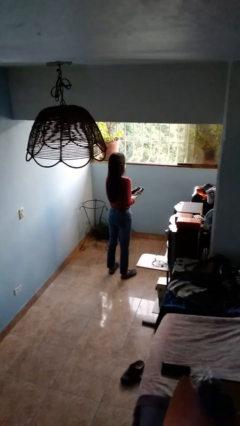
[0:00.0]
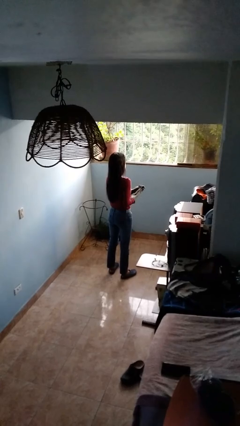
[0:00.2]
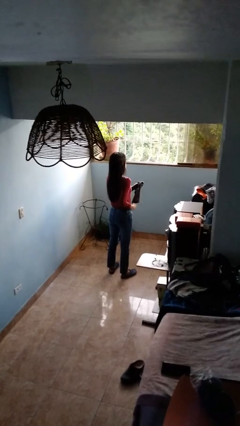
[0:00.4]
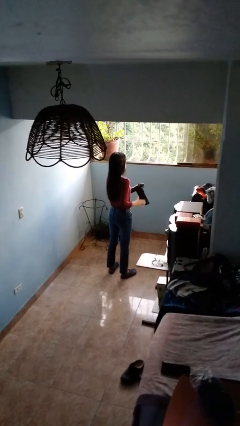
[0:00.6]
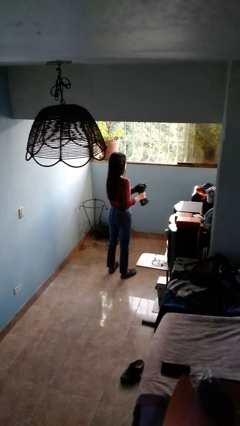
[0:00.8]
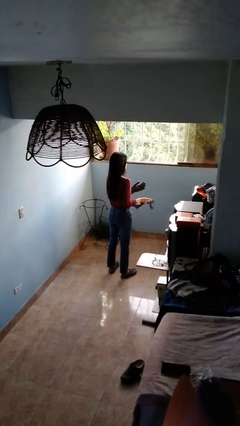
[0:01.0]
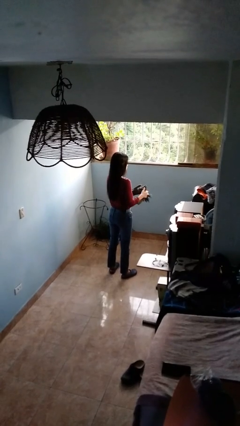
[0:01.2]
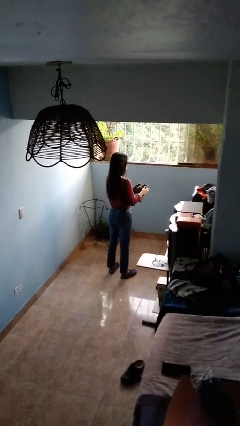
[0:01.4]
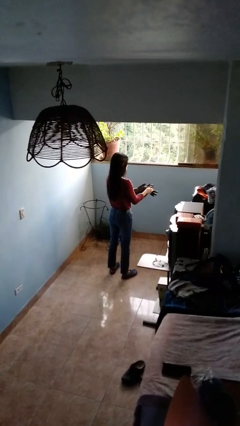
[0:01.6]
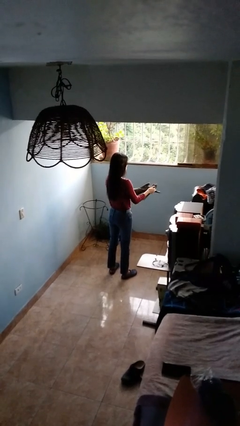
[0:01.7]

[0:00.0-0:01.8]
person takes off gloves

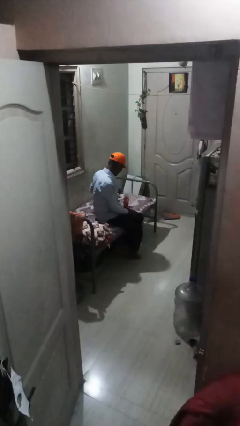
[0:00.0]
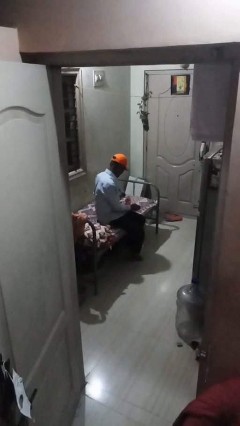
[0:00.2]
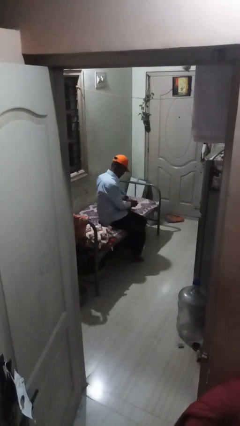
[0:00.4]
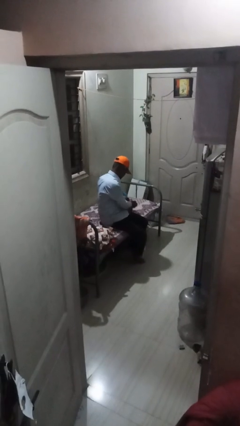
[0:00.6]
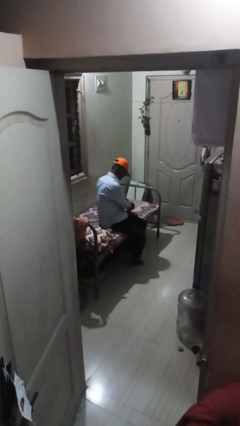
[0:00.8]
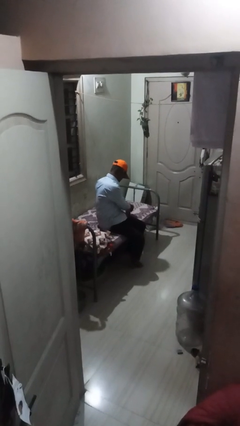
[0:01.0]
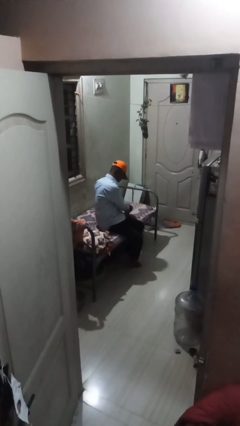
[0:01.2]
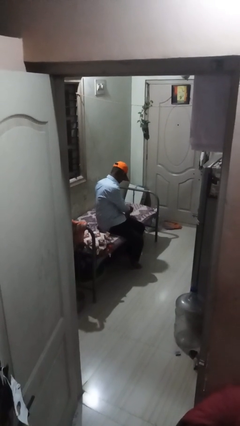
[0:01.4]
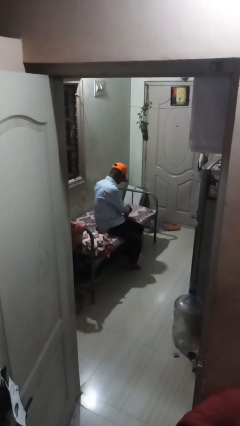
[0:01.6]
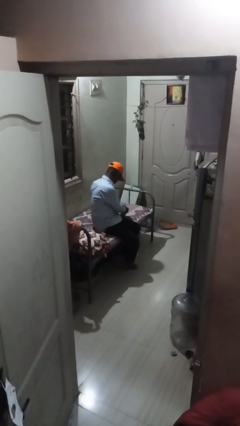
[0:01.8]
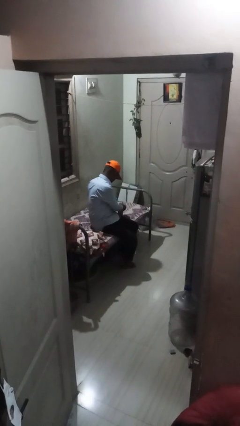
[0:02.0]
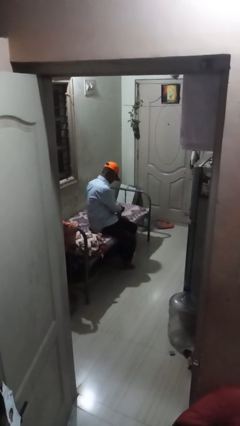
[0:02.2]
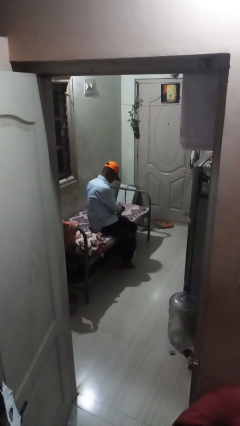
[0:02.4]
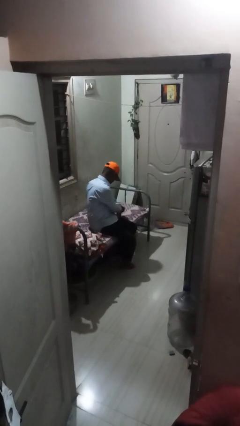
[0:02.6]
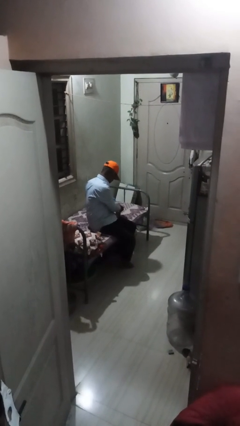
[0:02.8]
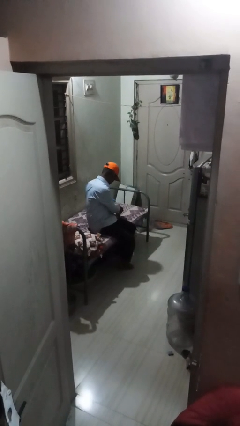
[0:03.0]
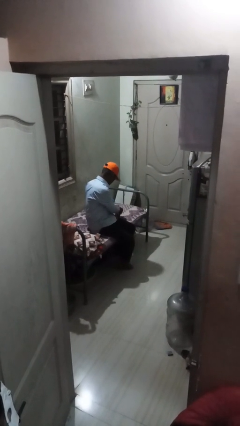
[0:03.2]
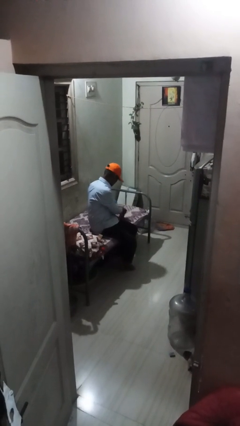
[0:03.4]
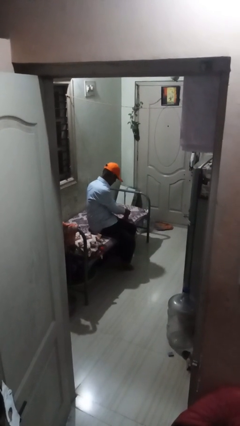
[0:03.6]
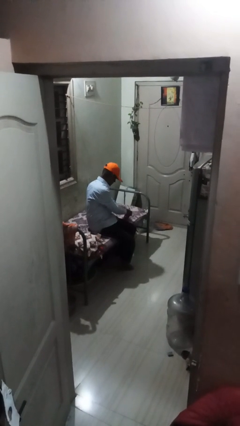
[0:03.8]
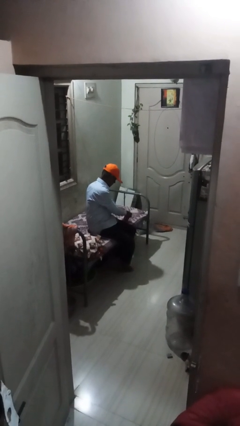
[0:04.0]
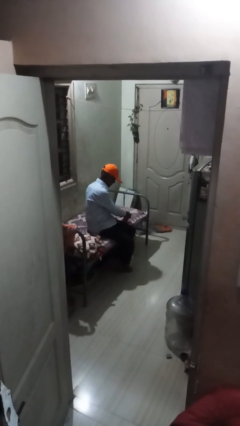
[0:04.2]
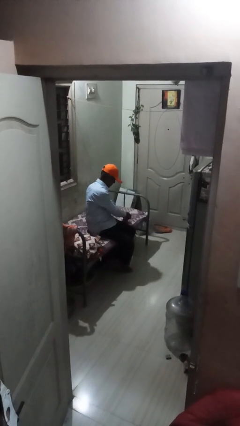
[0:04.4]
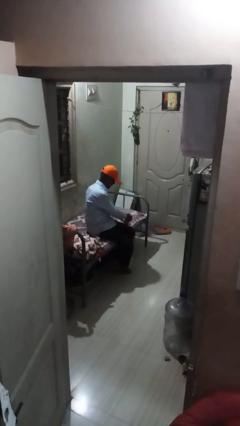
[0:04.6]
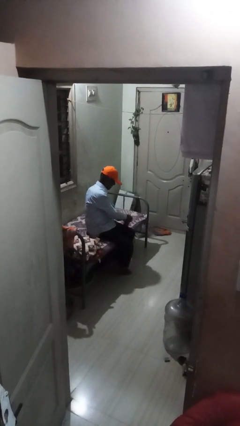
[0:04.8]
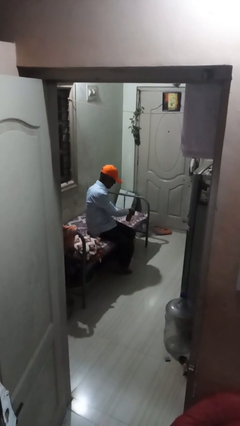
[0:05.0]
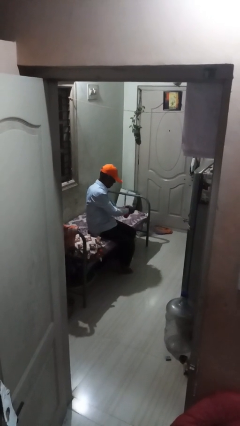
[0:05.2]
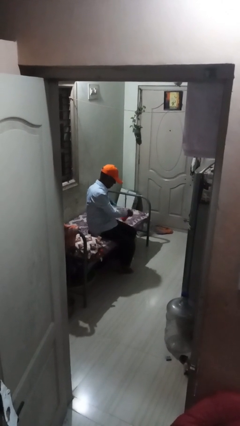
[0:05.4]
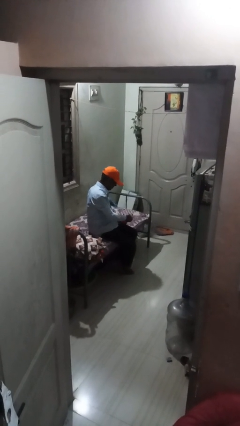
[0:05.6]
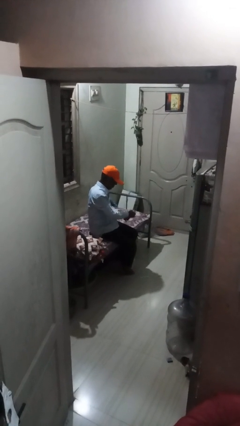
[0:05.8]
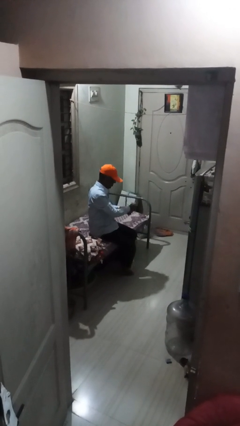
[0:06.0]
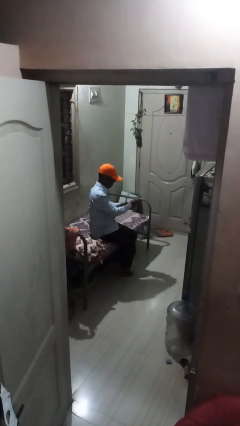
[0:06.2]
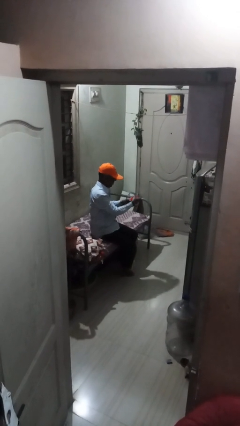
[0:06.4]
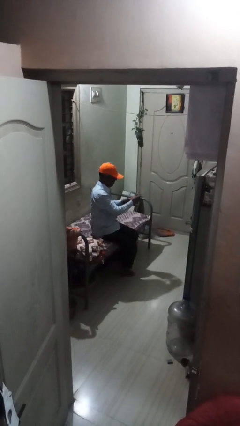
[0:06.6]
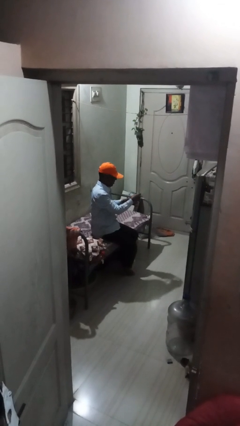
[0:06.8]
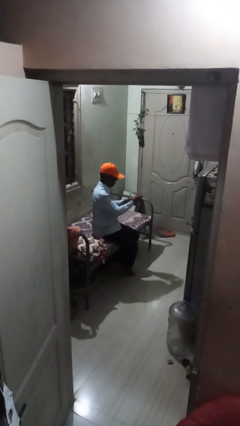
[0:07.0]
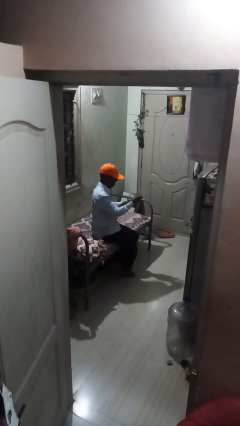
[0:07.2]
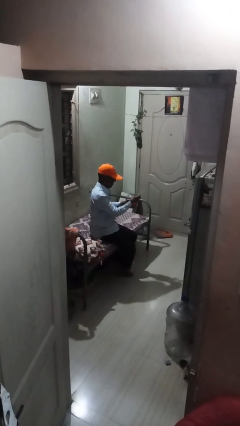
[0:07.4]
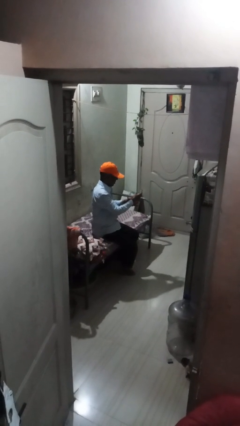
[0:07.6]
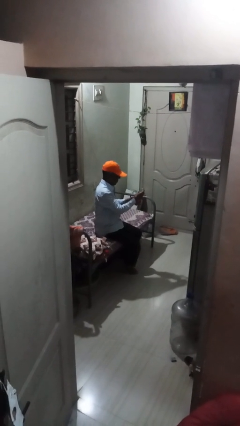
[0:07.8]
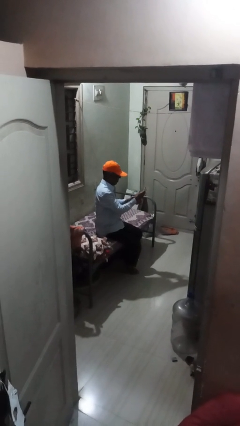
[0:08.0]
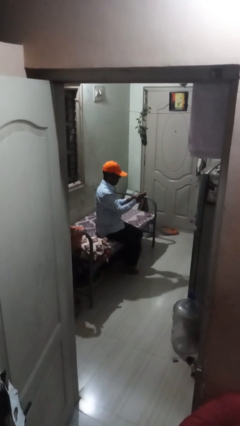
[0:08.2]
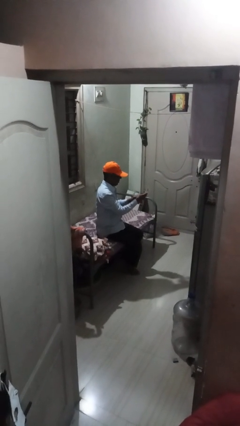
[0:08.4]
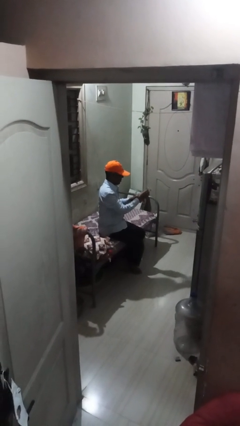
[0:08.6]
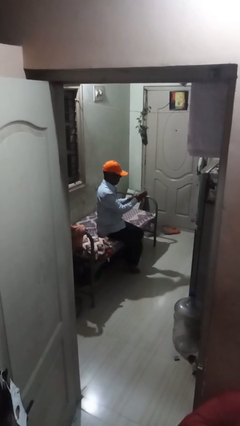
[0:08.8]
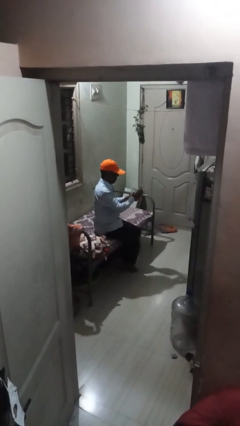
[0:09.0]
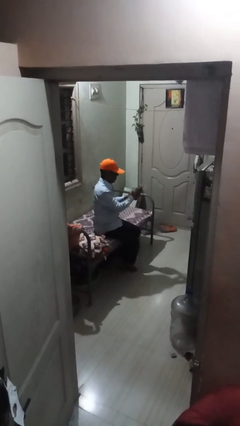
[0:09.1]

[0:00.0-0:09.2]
person arranges flowers in vase

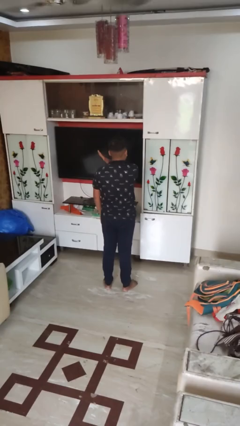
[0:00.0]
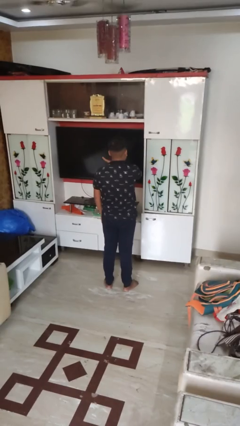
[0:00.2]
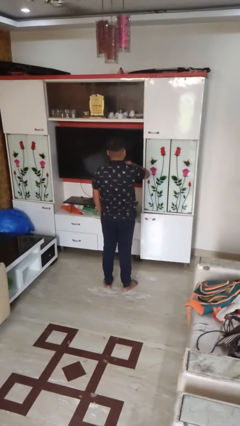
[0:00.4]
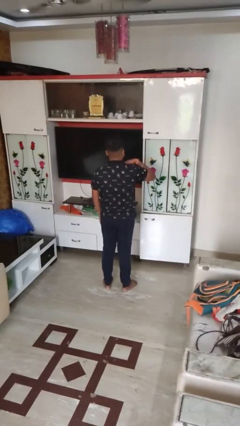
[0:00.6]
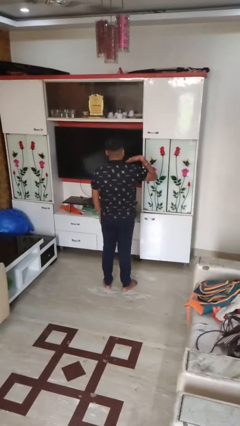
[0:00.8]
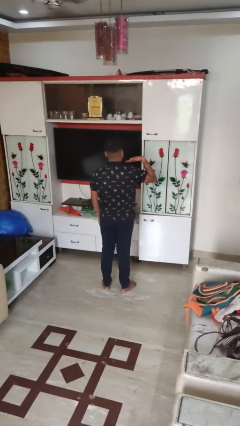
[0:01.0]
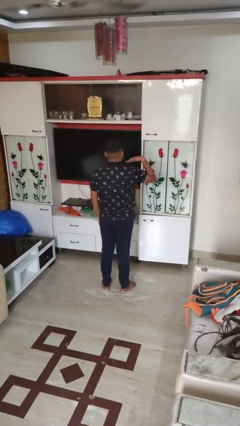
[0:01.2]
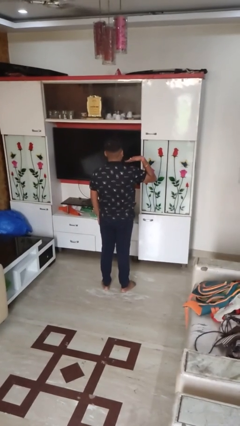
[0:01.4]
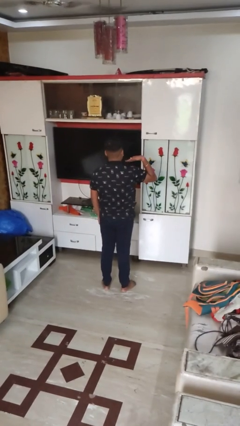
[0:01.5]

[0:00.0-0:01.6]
person gestures cut

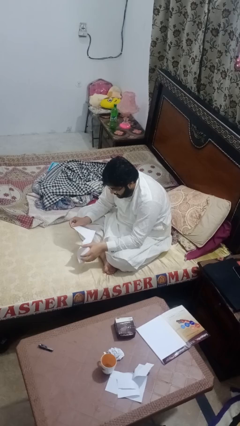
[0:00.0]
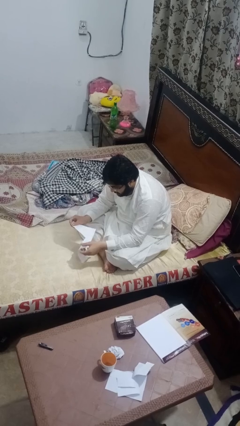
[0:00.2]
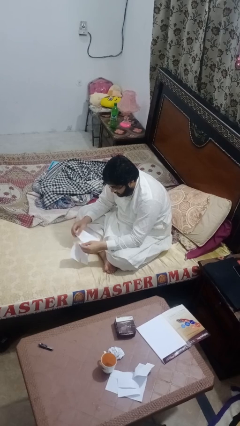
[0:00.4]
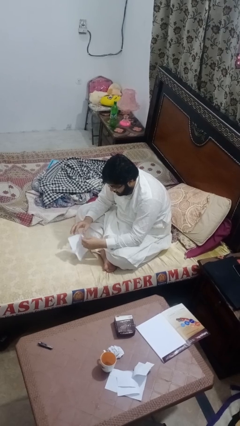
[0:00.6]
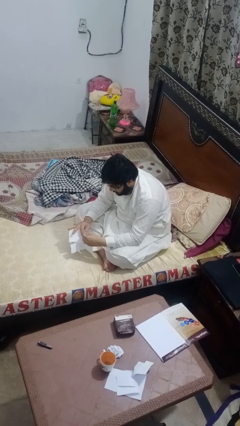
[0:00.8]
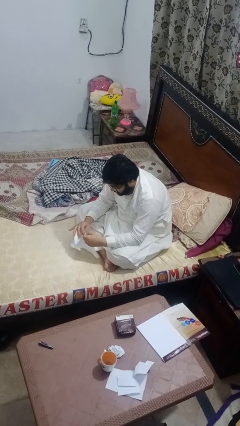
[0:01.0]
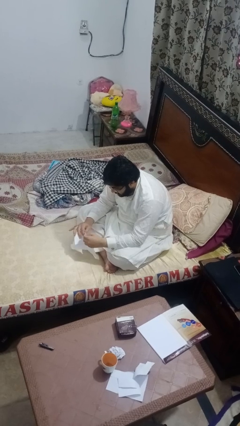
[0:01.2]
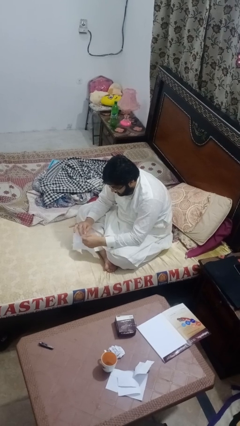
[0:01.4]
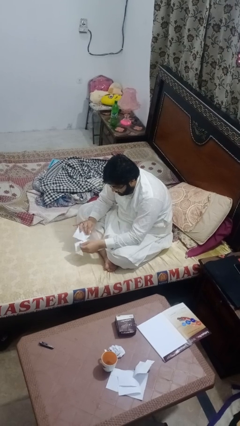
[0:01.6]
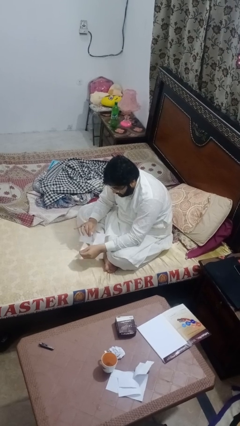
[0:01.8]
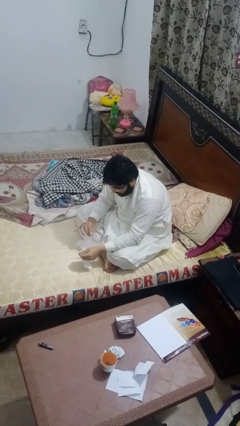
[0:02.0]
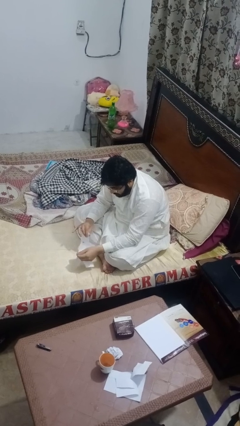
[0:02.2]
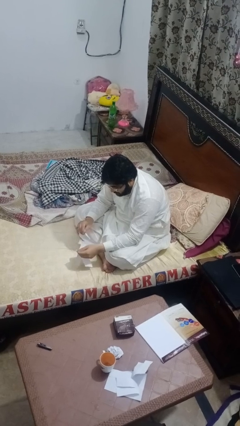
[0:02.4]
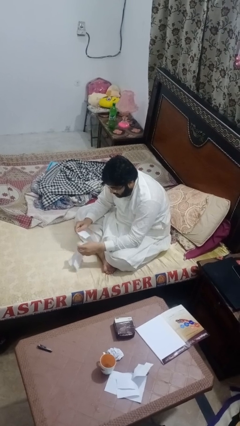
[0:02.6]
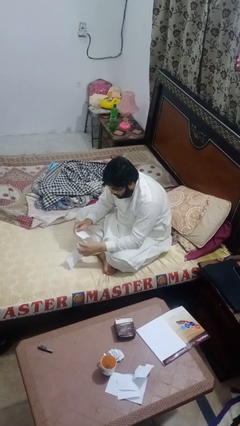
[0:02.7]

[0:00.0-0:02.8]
person tears paper

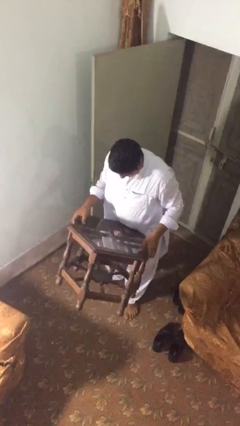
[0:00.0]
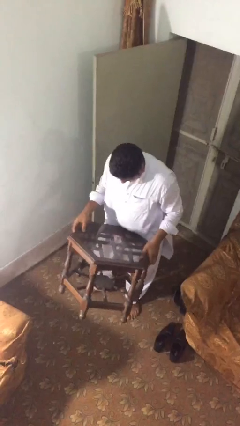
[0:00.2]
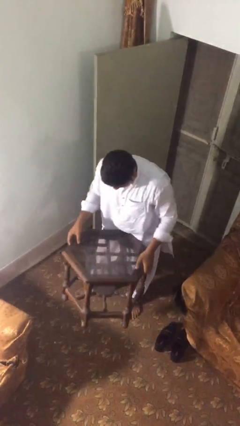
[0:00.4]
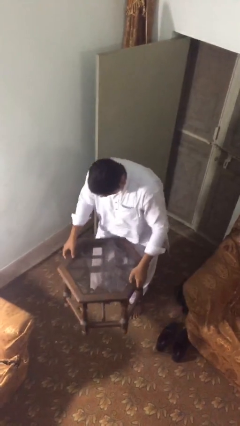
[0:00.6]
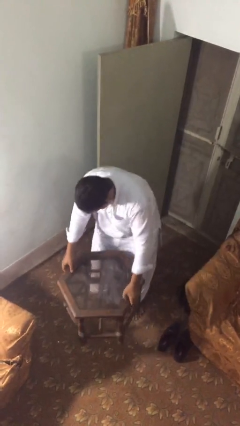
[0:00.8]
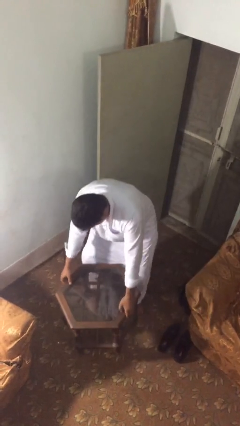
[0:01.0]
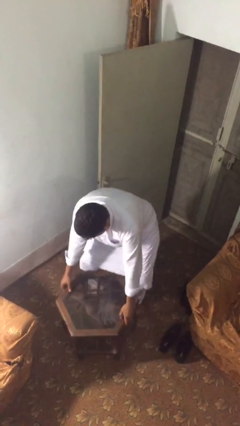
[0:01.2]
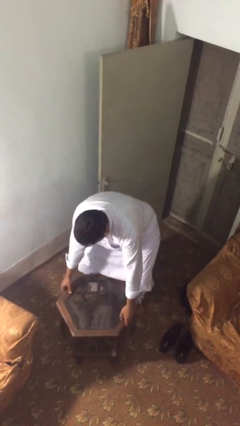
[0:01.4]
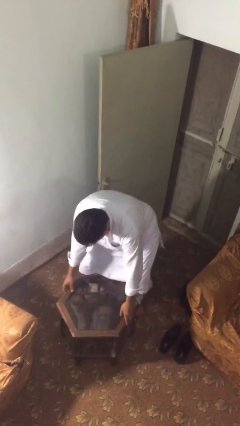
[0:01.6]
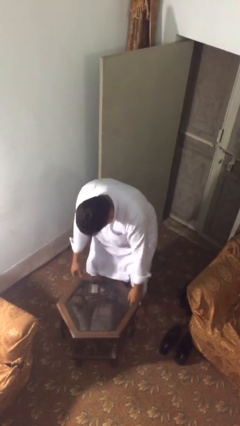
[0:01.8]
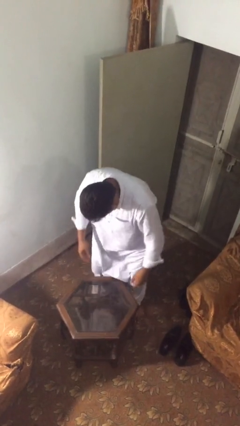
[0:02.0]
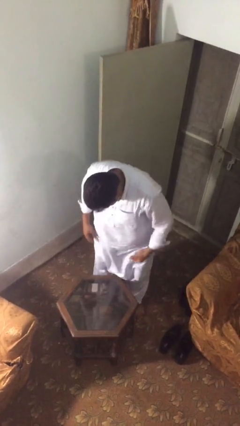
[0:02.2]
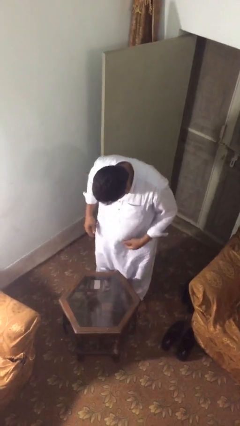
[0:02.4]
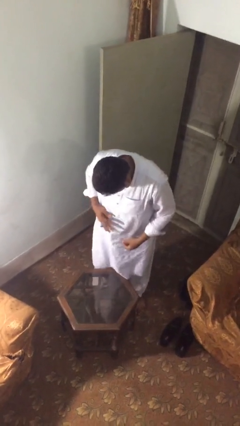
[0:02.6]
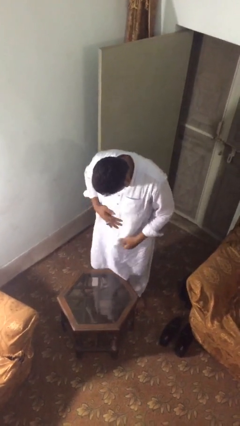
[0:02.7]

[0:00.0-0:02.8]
person puts down object on floor
